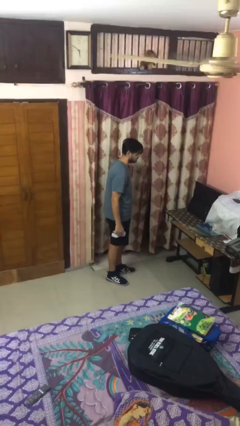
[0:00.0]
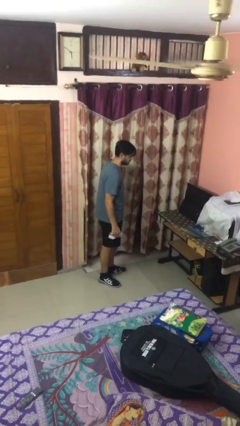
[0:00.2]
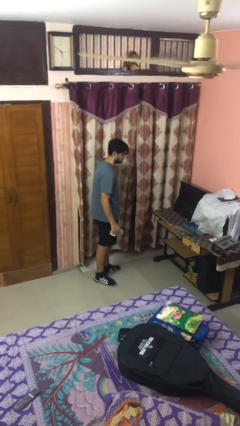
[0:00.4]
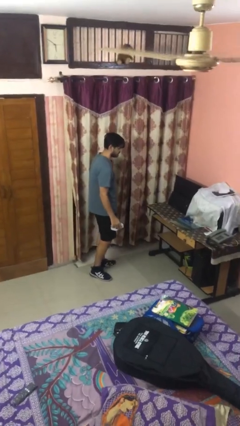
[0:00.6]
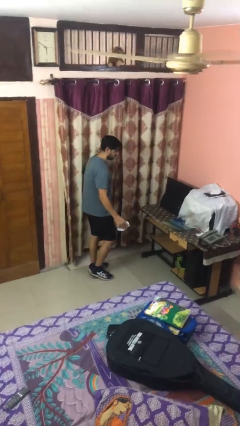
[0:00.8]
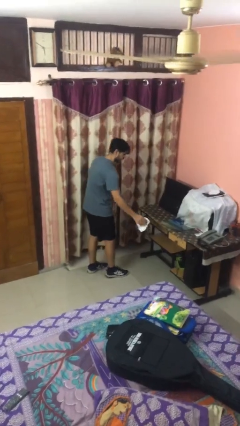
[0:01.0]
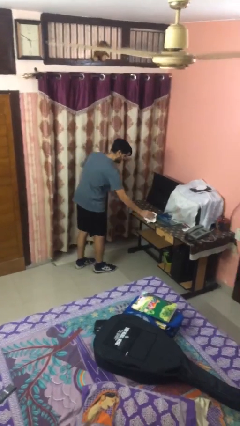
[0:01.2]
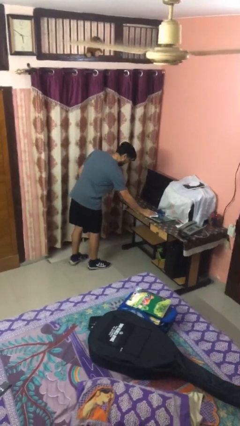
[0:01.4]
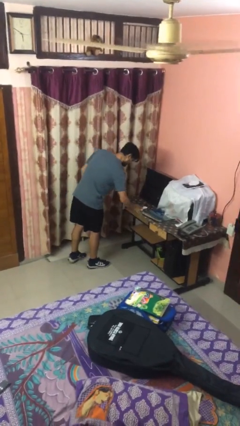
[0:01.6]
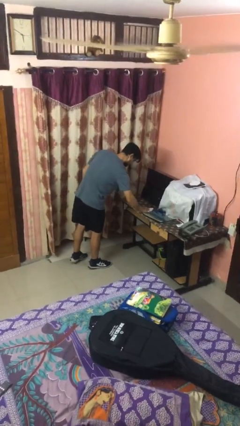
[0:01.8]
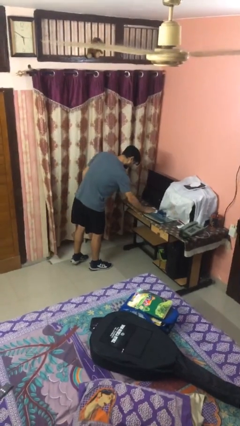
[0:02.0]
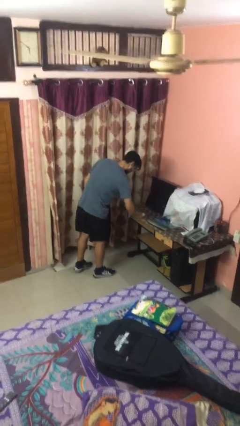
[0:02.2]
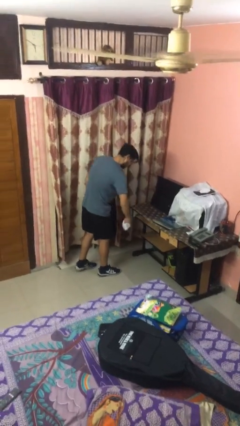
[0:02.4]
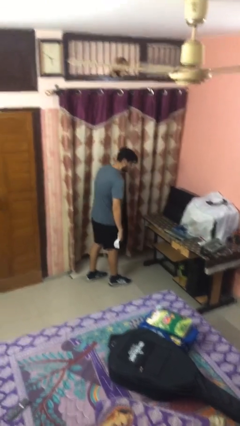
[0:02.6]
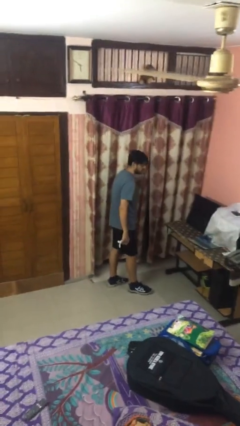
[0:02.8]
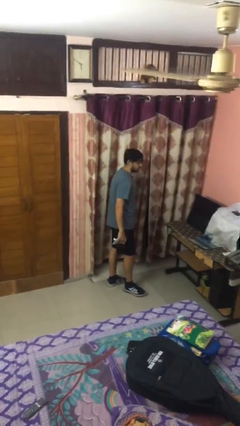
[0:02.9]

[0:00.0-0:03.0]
person cleans table with rag

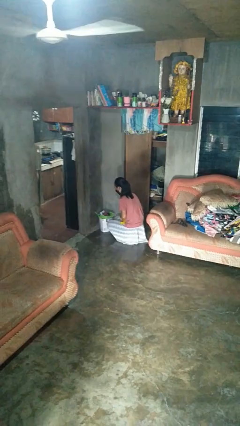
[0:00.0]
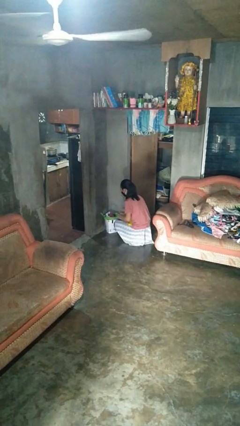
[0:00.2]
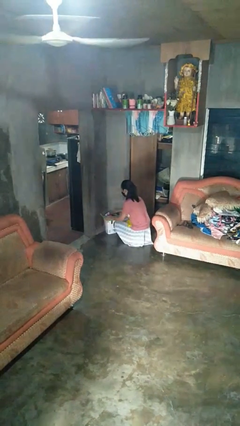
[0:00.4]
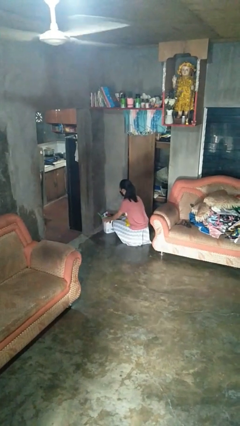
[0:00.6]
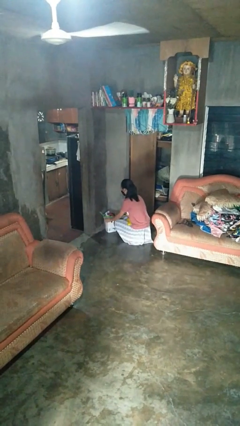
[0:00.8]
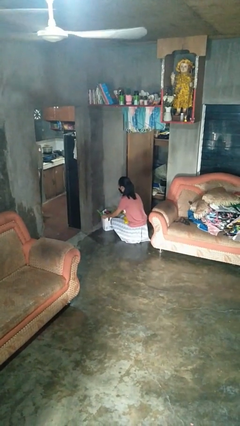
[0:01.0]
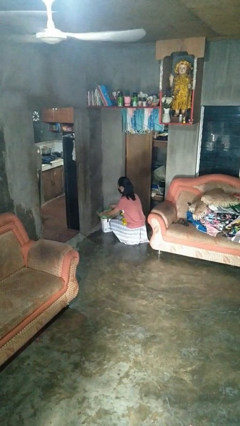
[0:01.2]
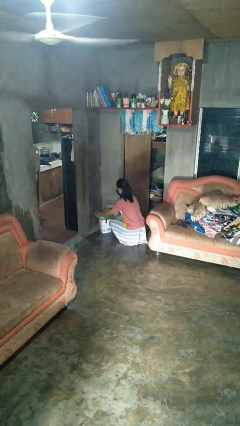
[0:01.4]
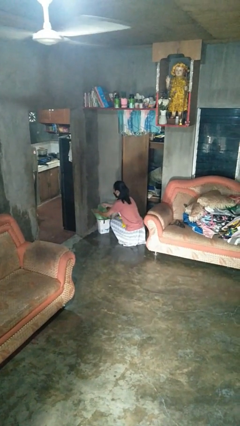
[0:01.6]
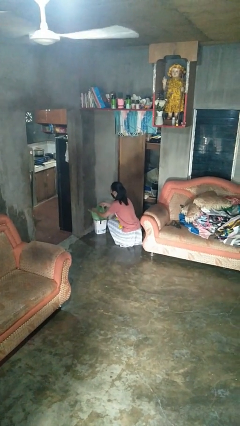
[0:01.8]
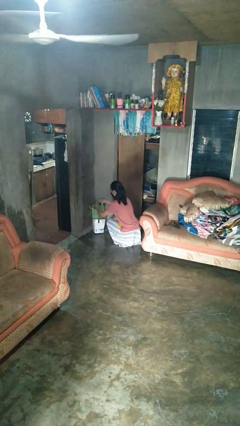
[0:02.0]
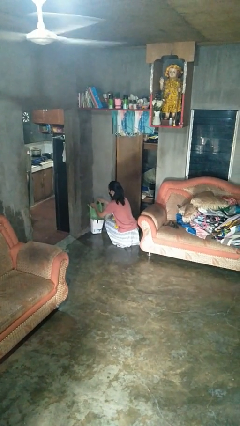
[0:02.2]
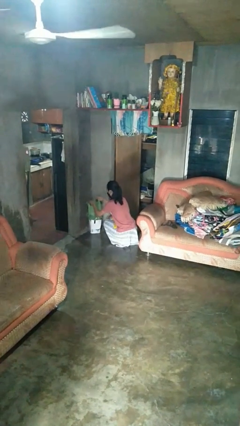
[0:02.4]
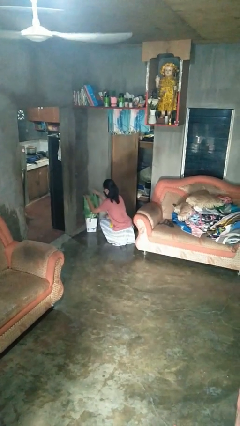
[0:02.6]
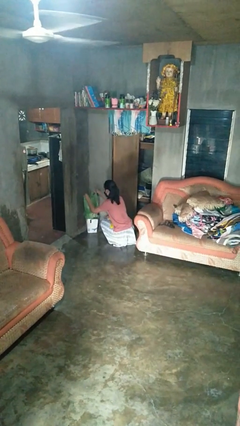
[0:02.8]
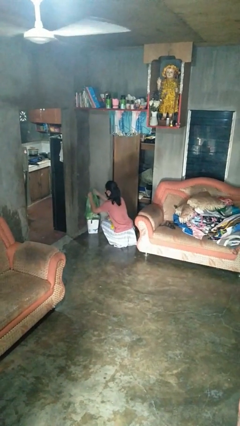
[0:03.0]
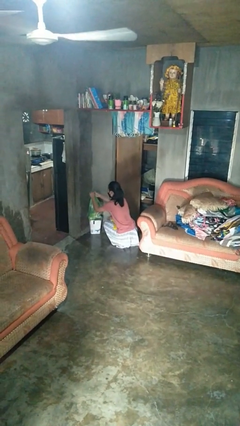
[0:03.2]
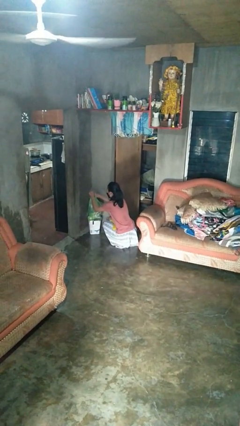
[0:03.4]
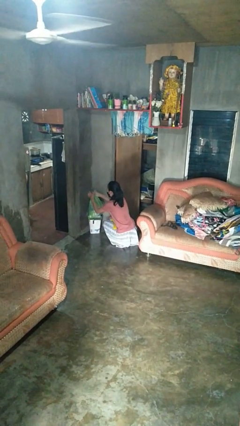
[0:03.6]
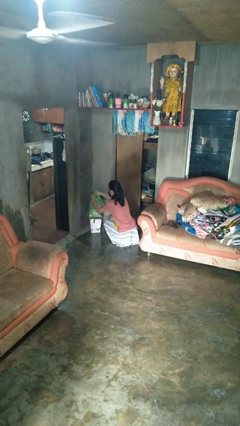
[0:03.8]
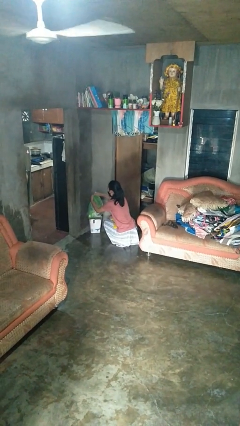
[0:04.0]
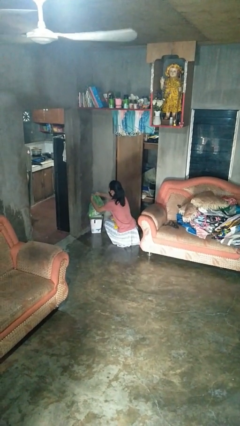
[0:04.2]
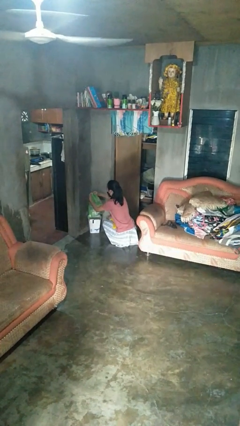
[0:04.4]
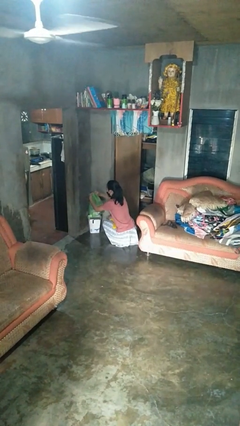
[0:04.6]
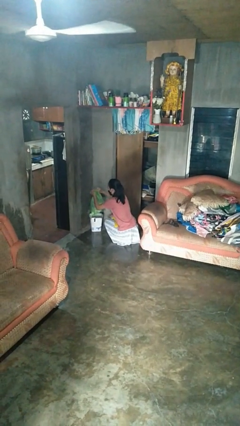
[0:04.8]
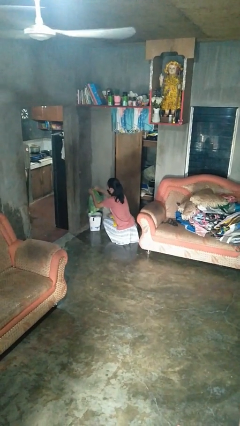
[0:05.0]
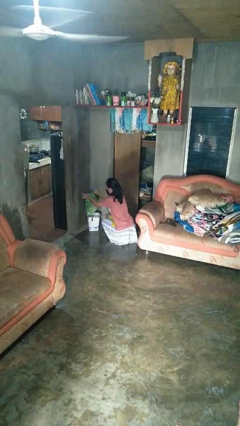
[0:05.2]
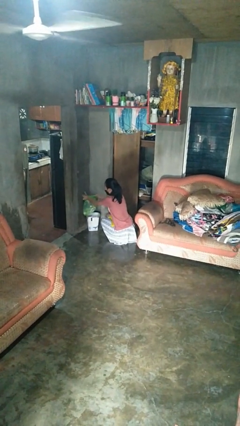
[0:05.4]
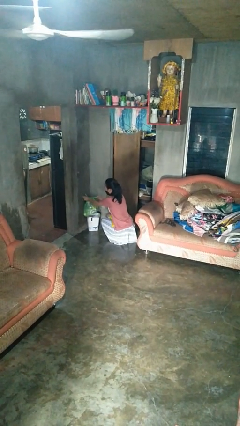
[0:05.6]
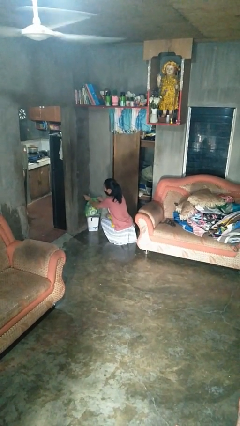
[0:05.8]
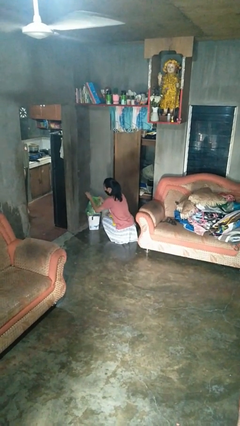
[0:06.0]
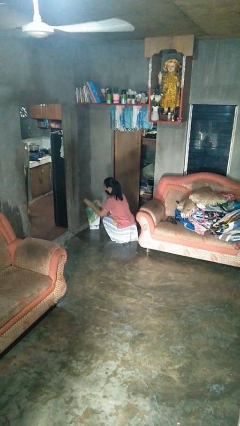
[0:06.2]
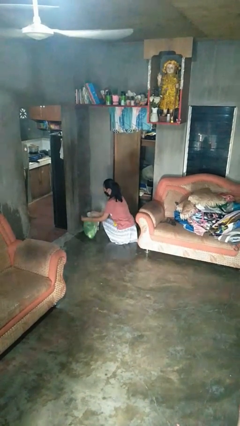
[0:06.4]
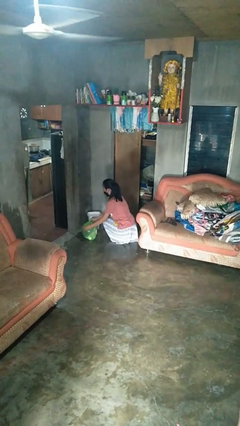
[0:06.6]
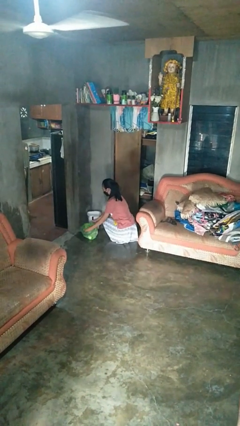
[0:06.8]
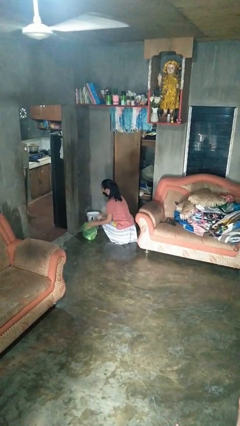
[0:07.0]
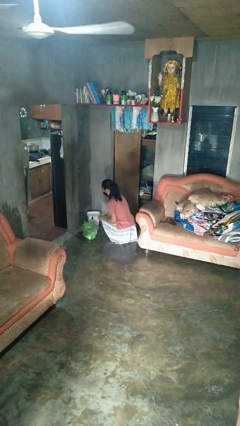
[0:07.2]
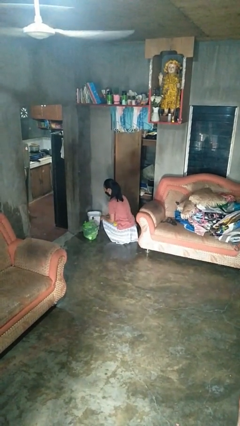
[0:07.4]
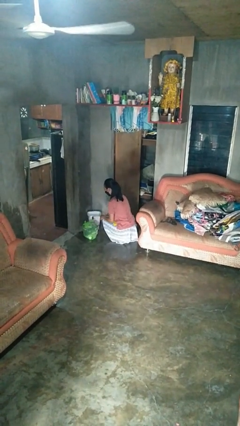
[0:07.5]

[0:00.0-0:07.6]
person removes trashbag from trashcan

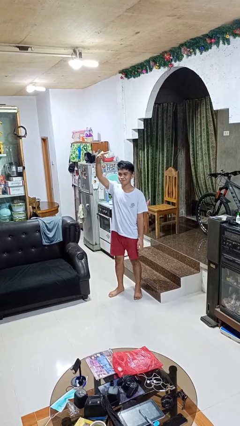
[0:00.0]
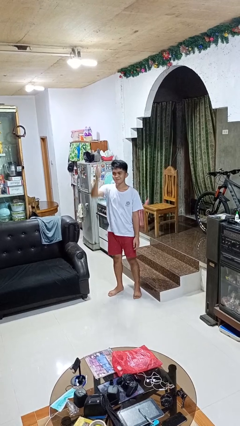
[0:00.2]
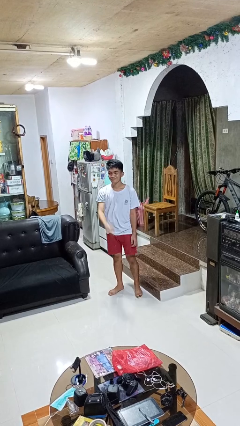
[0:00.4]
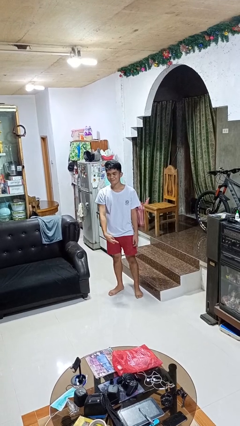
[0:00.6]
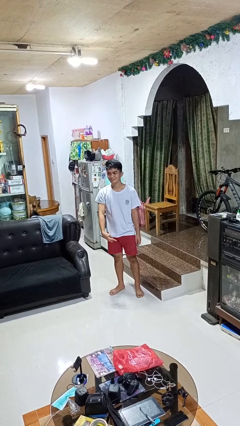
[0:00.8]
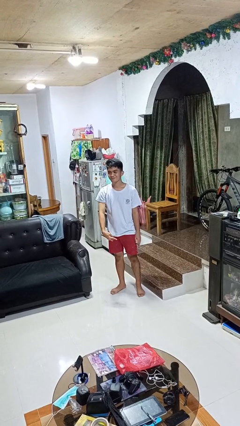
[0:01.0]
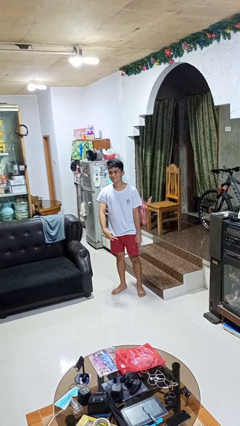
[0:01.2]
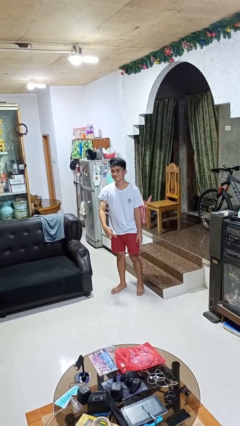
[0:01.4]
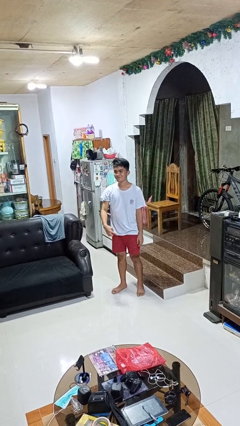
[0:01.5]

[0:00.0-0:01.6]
person gestures swipe down

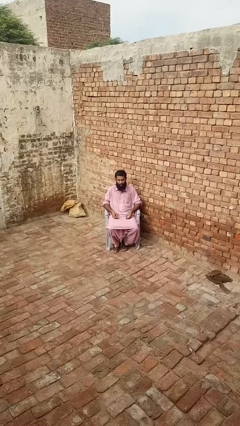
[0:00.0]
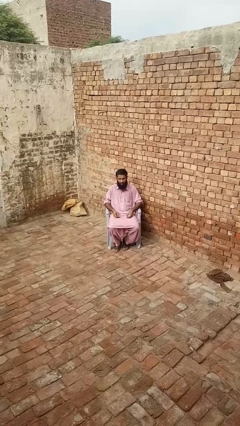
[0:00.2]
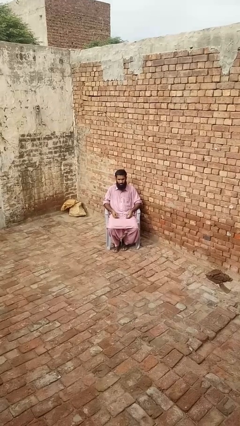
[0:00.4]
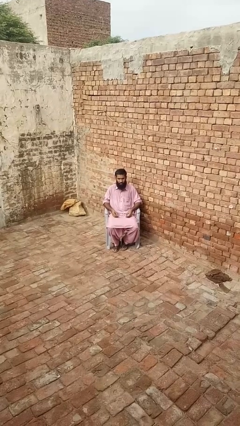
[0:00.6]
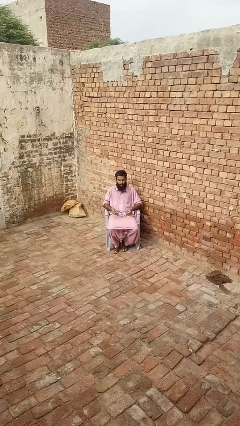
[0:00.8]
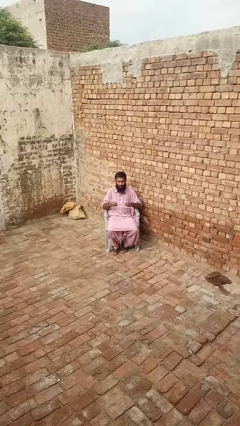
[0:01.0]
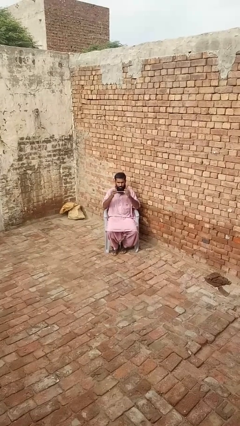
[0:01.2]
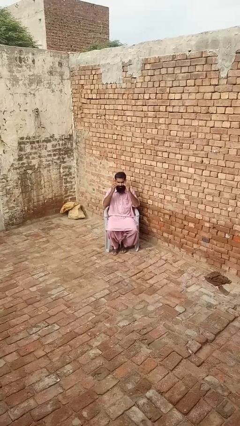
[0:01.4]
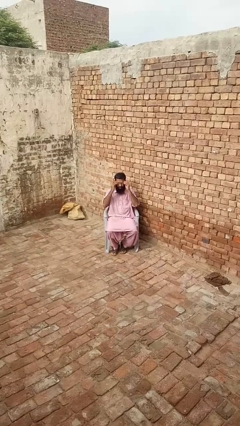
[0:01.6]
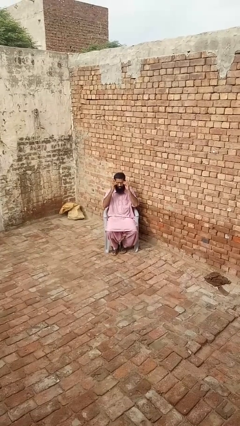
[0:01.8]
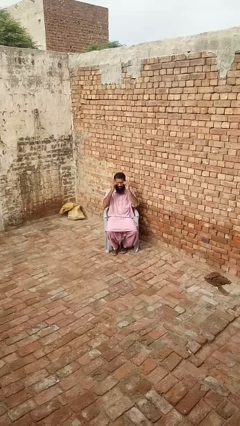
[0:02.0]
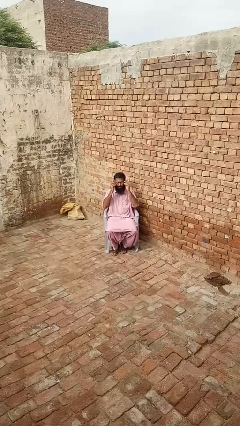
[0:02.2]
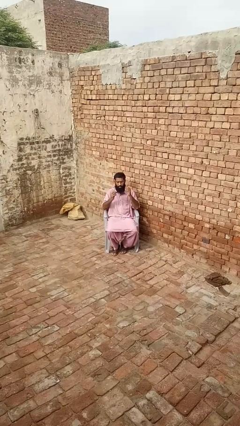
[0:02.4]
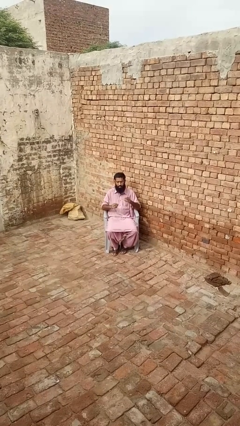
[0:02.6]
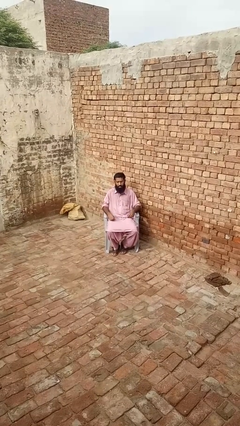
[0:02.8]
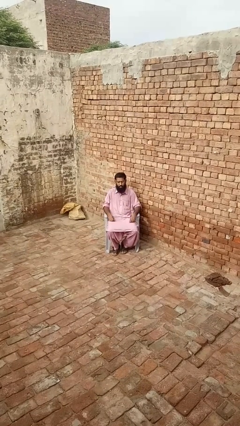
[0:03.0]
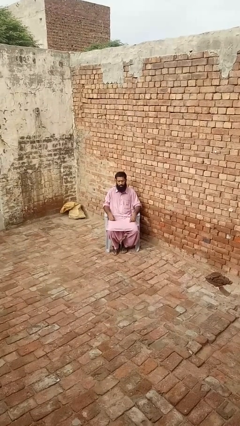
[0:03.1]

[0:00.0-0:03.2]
person puts on glasses

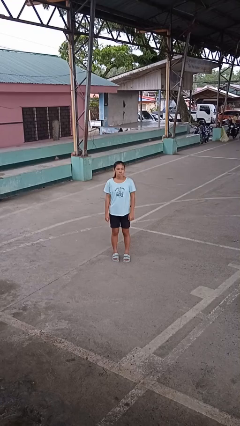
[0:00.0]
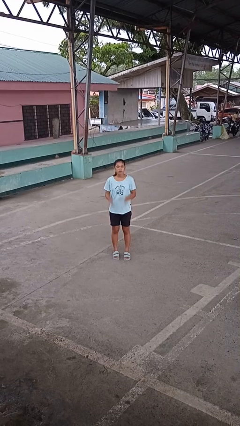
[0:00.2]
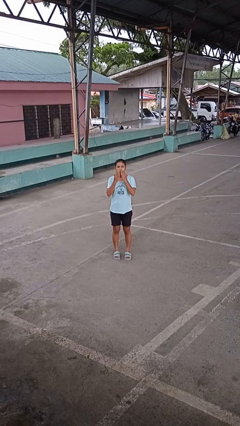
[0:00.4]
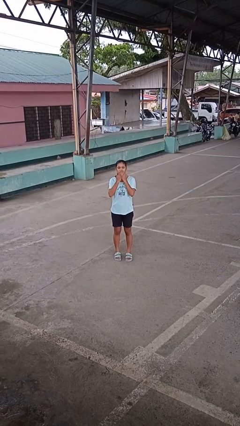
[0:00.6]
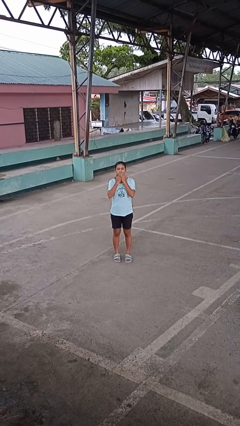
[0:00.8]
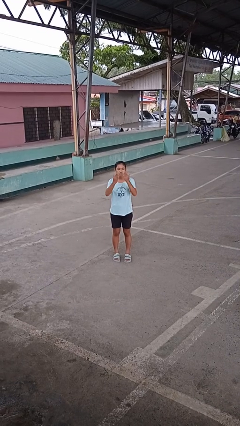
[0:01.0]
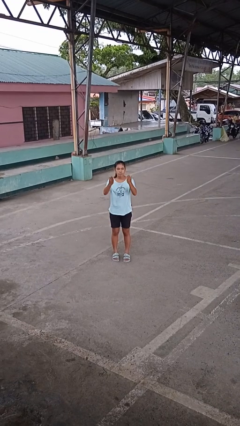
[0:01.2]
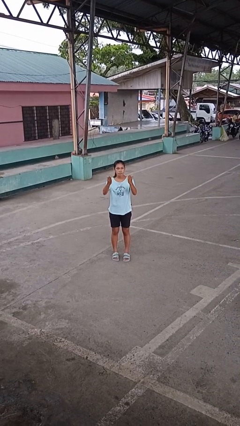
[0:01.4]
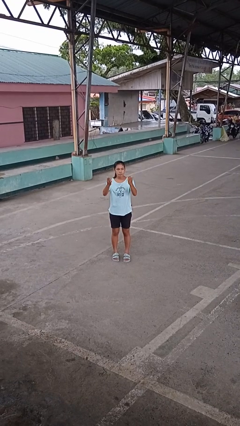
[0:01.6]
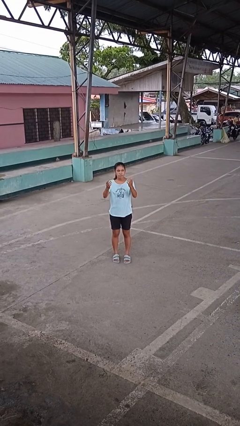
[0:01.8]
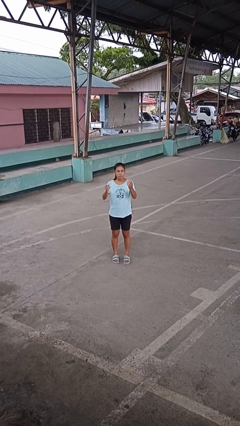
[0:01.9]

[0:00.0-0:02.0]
person gestures blow kiss

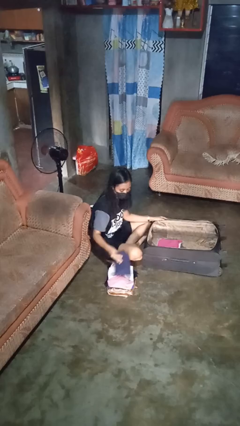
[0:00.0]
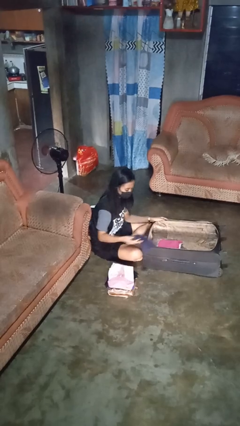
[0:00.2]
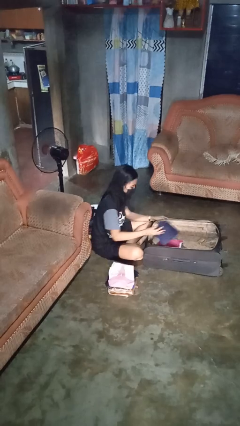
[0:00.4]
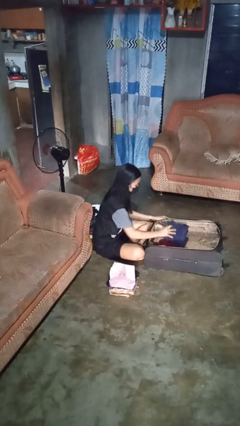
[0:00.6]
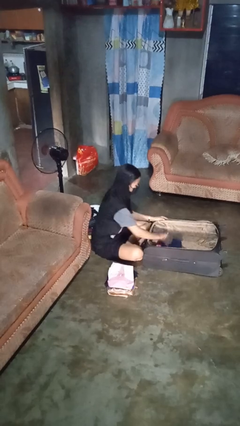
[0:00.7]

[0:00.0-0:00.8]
person loads clothes into suitcase
